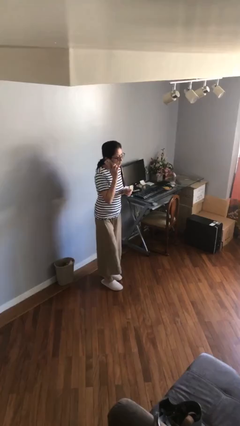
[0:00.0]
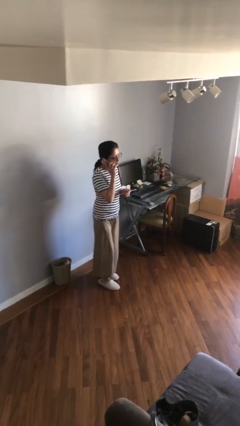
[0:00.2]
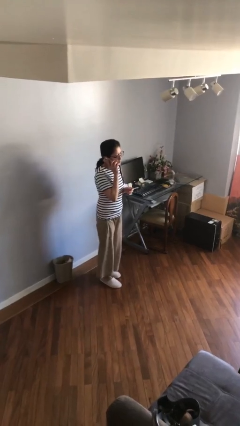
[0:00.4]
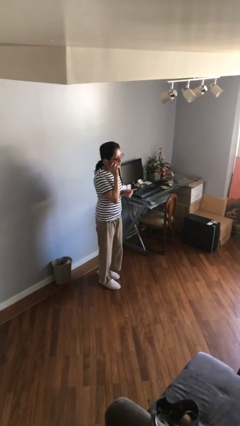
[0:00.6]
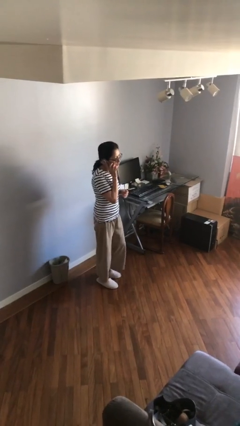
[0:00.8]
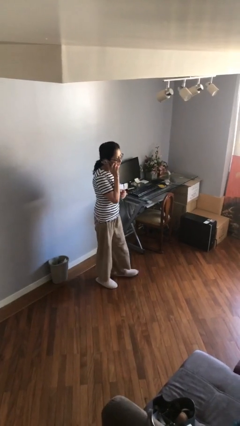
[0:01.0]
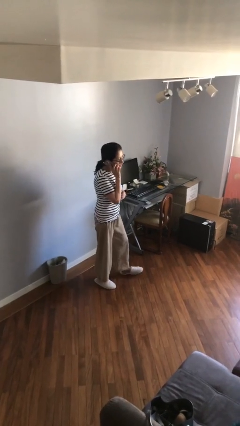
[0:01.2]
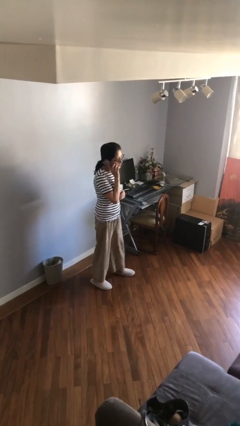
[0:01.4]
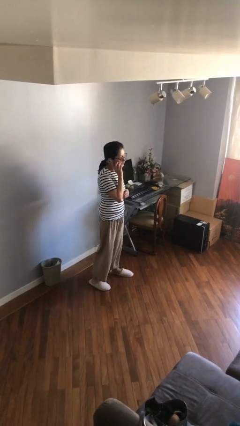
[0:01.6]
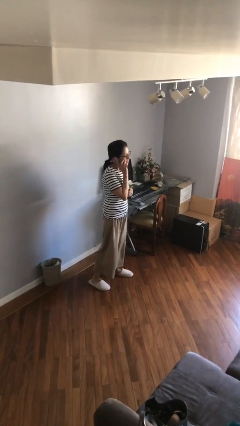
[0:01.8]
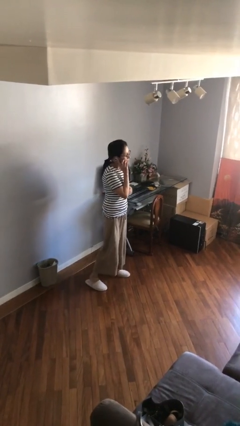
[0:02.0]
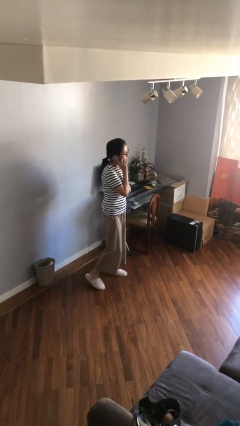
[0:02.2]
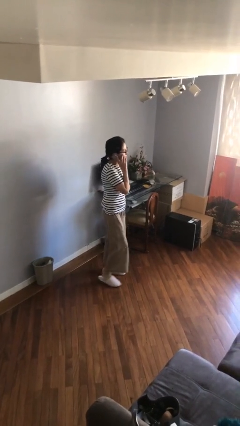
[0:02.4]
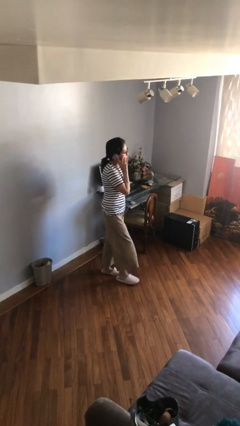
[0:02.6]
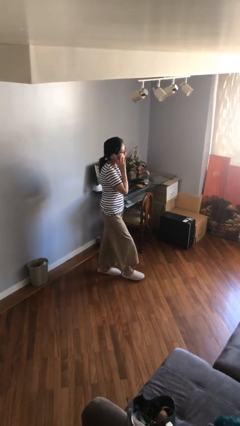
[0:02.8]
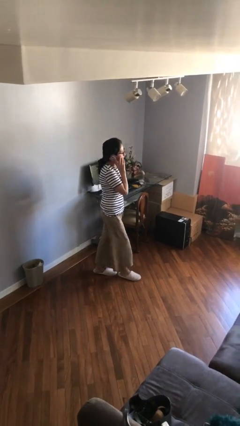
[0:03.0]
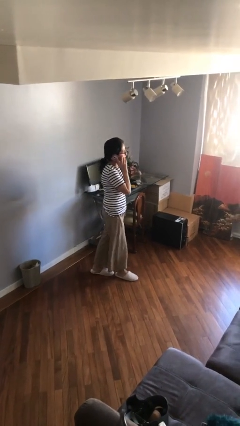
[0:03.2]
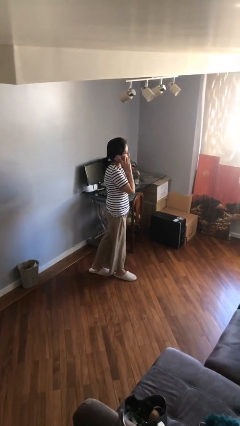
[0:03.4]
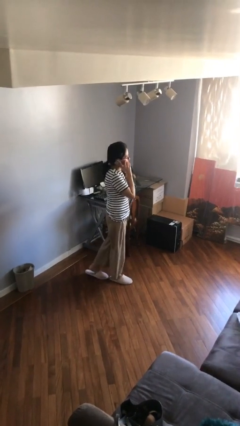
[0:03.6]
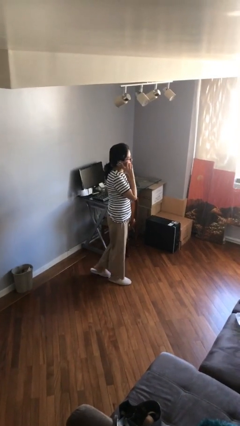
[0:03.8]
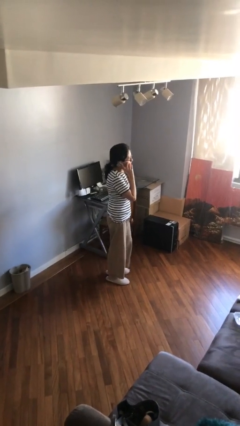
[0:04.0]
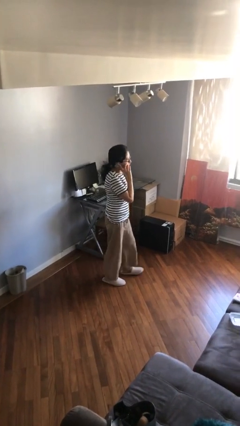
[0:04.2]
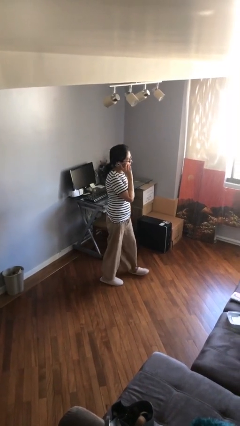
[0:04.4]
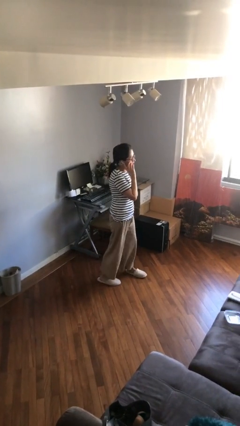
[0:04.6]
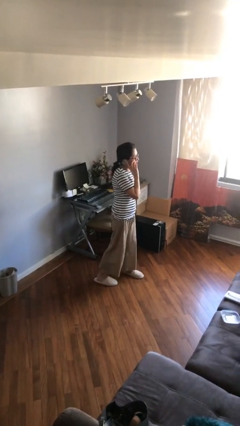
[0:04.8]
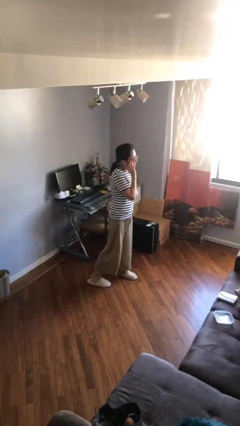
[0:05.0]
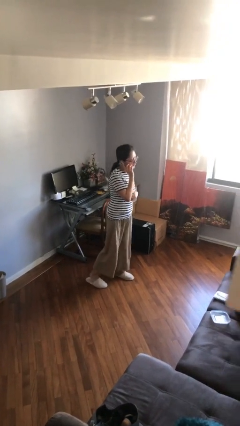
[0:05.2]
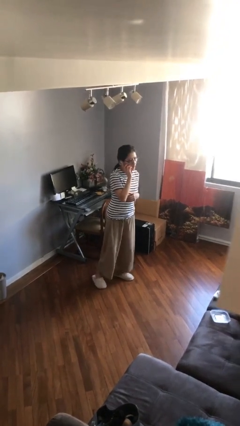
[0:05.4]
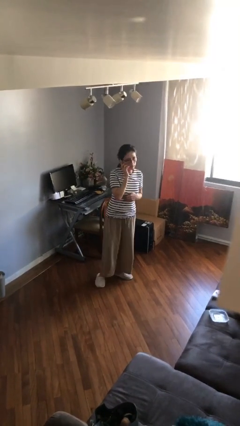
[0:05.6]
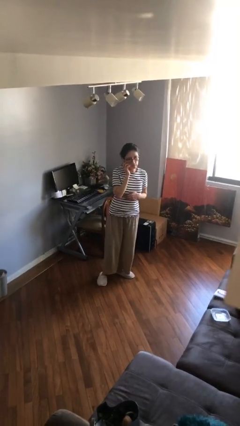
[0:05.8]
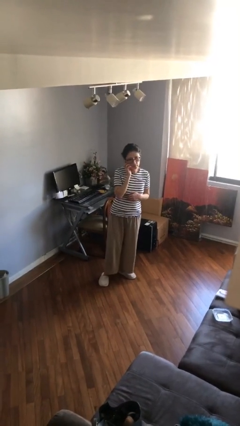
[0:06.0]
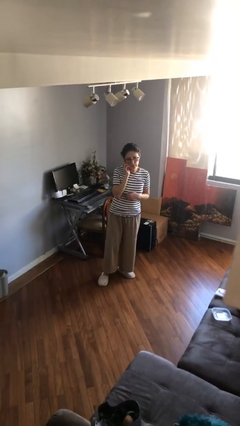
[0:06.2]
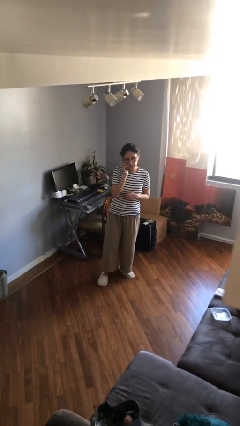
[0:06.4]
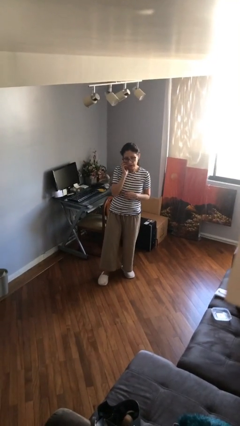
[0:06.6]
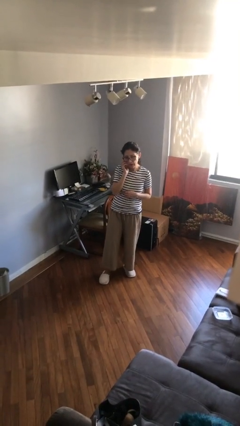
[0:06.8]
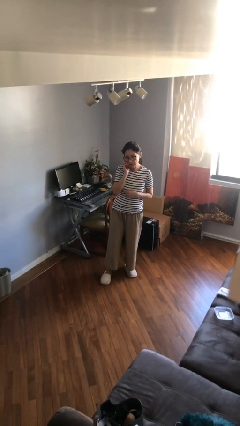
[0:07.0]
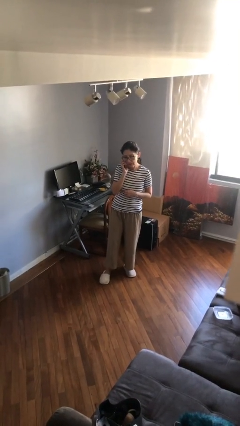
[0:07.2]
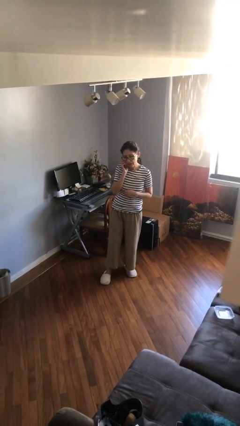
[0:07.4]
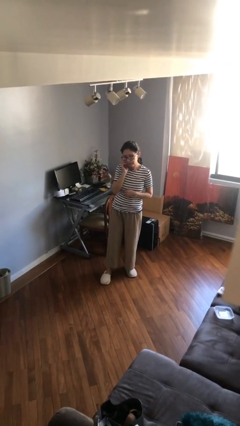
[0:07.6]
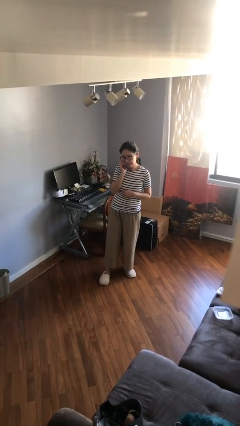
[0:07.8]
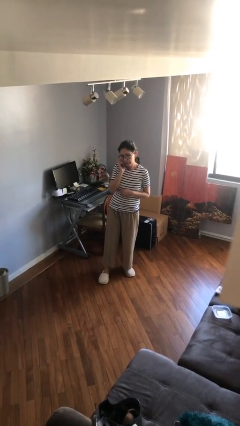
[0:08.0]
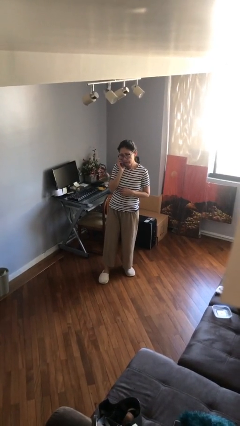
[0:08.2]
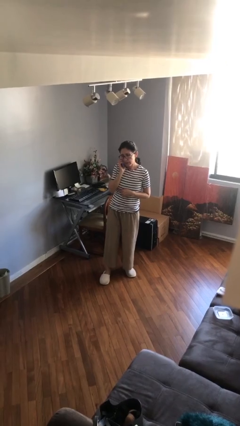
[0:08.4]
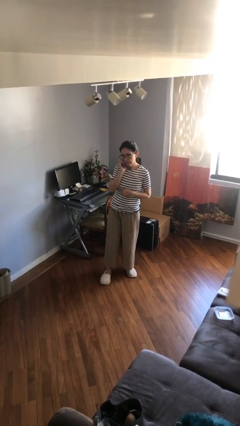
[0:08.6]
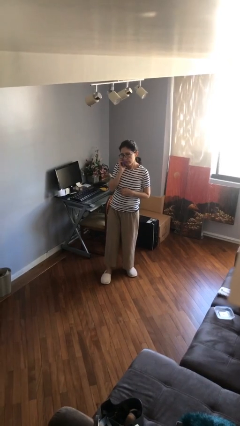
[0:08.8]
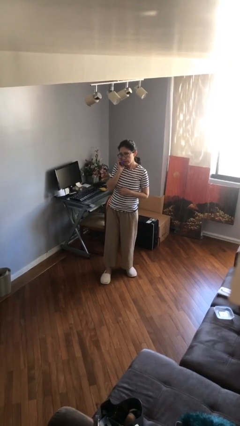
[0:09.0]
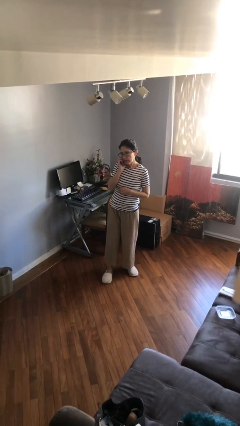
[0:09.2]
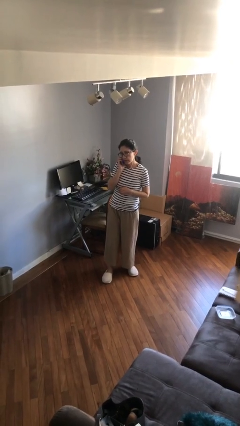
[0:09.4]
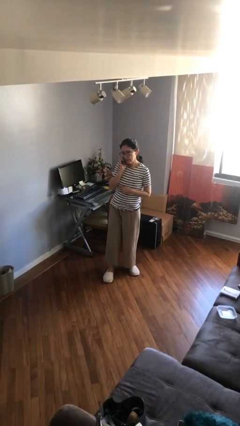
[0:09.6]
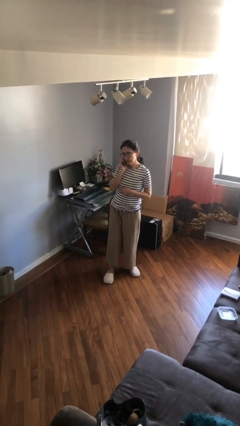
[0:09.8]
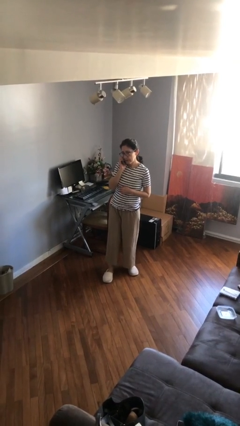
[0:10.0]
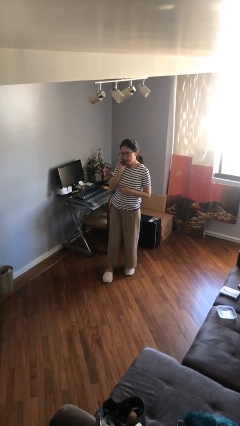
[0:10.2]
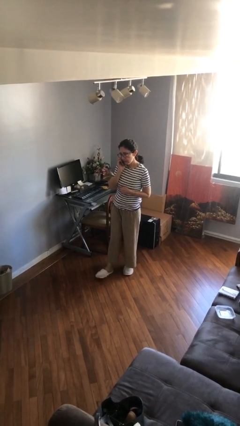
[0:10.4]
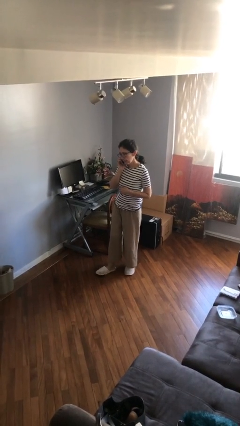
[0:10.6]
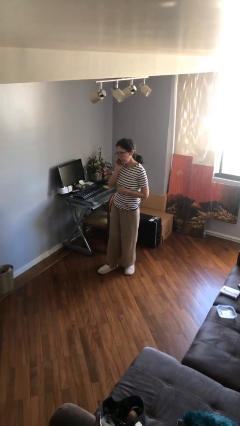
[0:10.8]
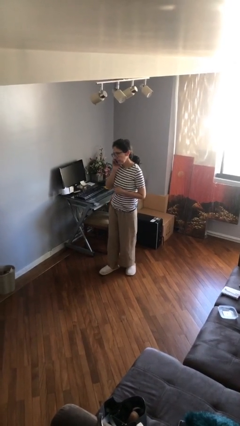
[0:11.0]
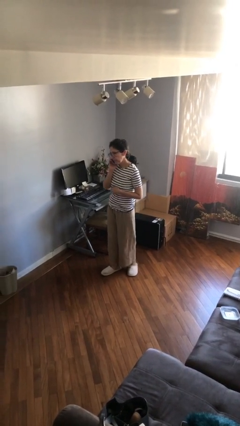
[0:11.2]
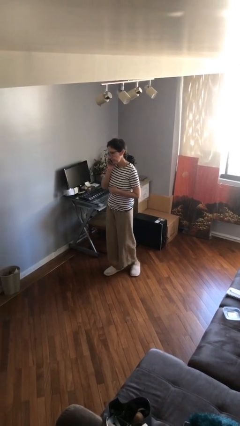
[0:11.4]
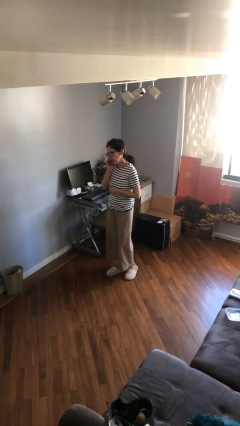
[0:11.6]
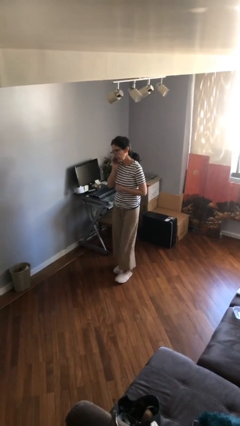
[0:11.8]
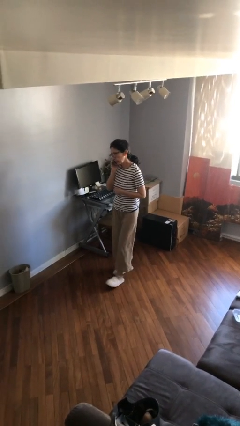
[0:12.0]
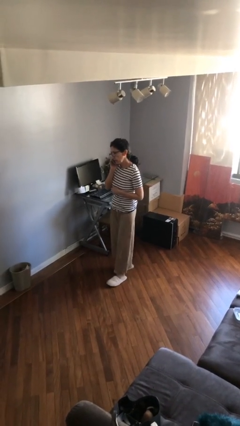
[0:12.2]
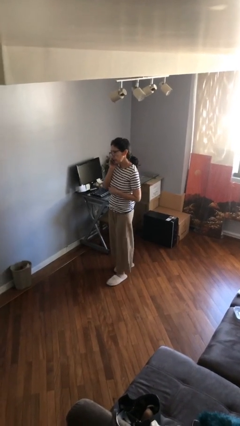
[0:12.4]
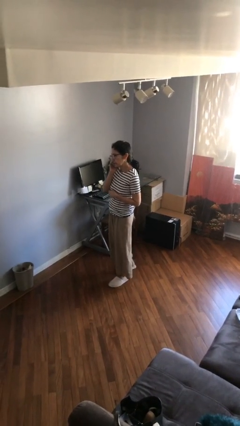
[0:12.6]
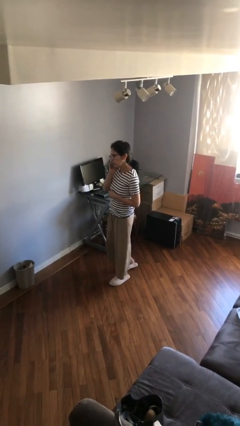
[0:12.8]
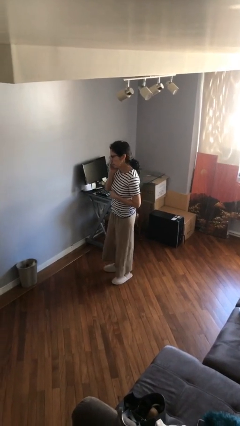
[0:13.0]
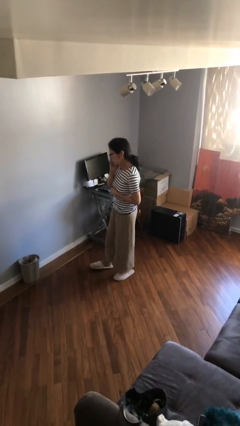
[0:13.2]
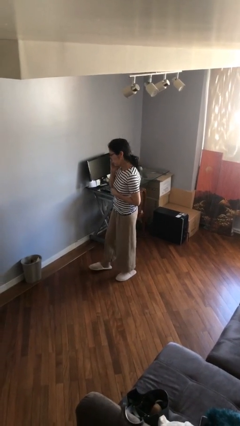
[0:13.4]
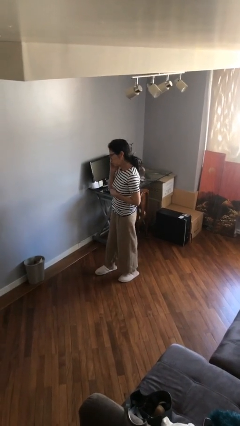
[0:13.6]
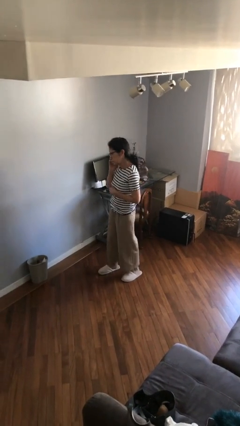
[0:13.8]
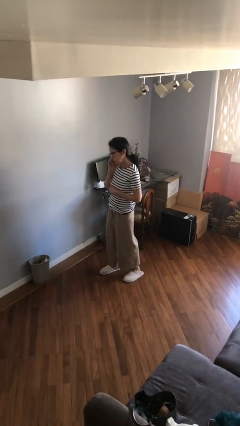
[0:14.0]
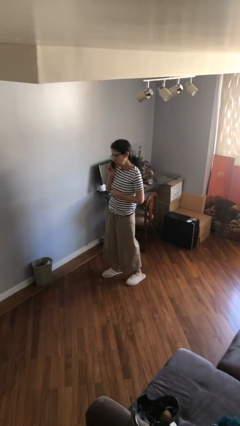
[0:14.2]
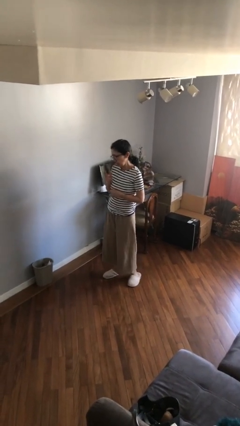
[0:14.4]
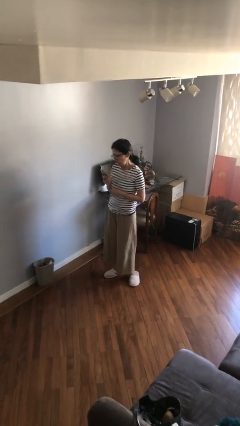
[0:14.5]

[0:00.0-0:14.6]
person talks on phone

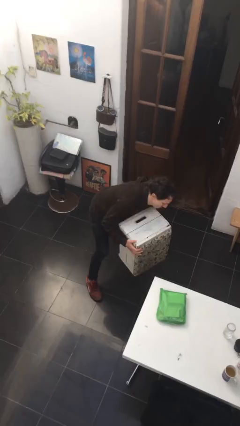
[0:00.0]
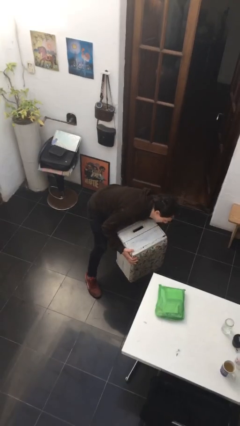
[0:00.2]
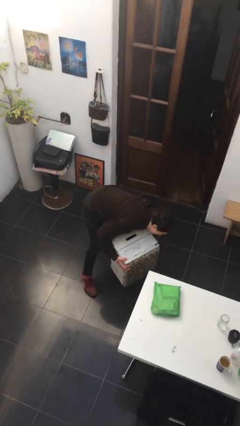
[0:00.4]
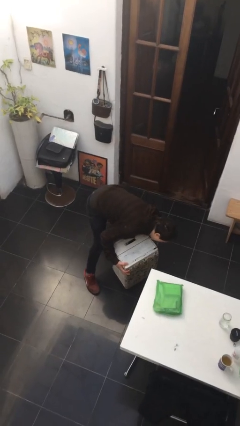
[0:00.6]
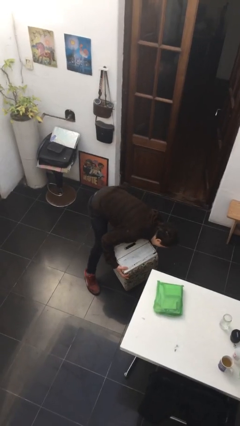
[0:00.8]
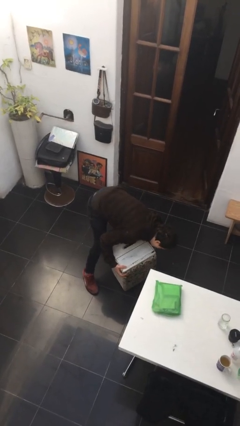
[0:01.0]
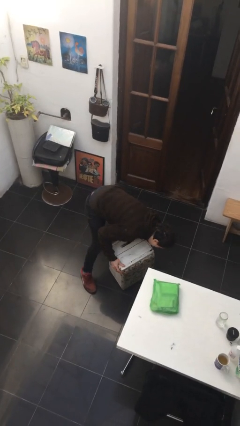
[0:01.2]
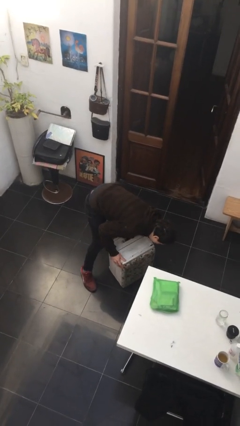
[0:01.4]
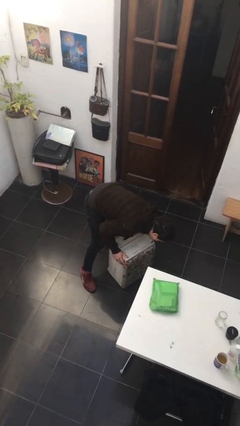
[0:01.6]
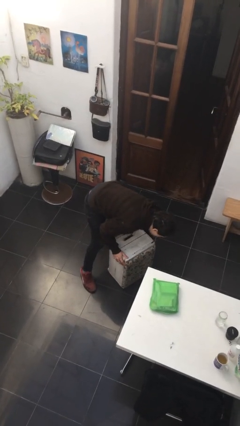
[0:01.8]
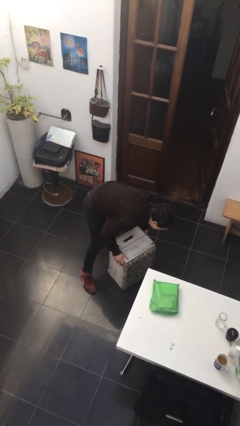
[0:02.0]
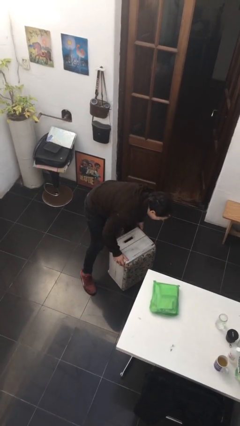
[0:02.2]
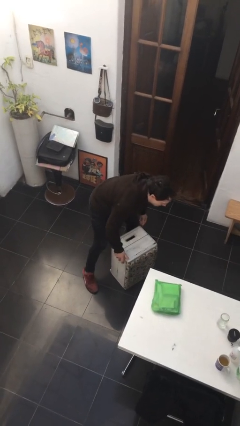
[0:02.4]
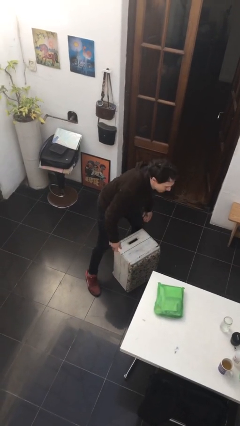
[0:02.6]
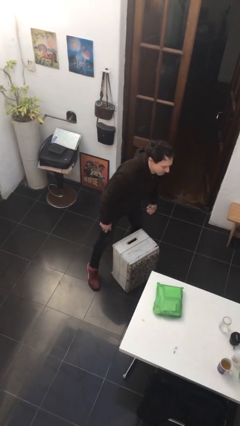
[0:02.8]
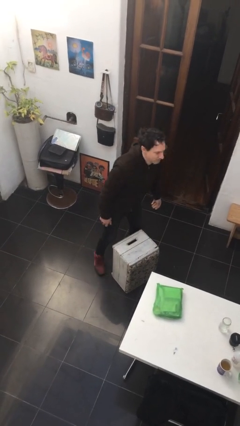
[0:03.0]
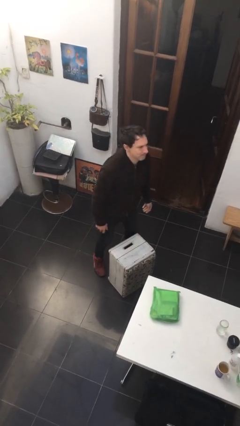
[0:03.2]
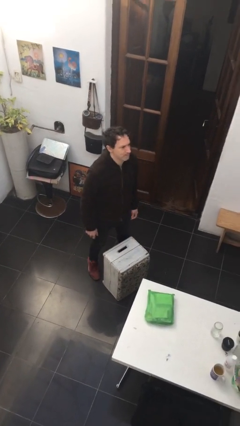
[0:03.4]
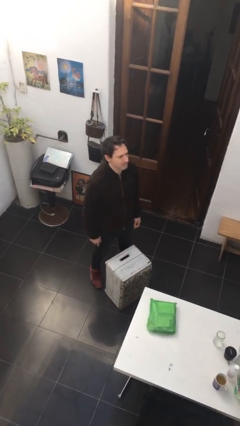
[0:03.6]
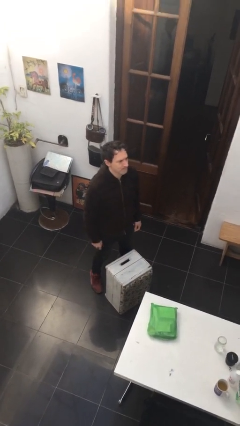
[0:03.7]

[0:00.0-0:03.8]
person puts down object on floor
